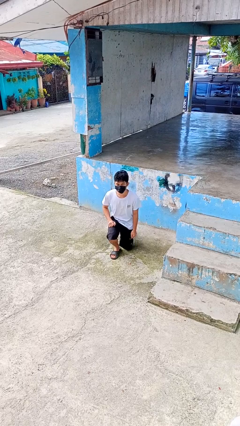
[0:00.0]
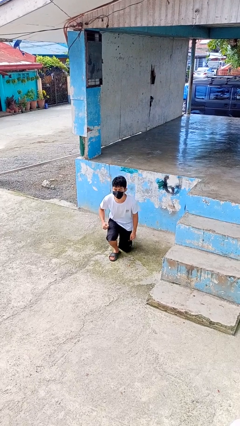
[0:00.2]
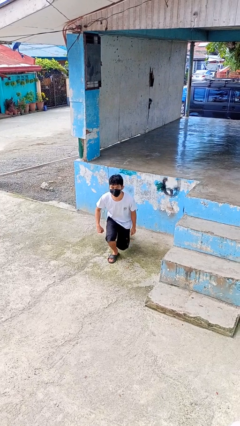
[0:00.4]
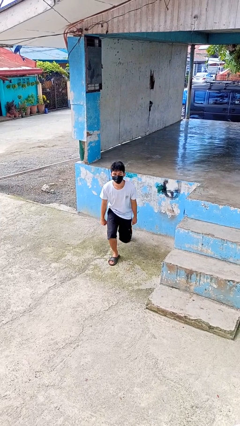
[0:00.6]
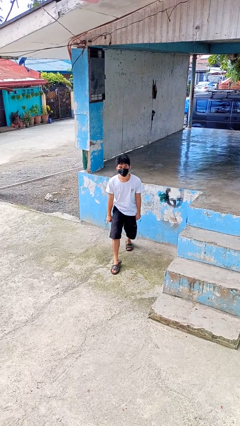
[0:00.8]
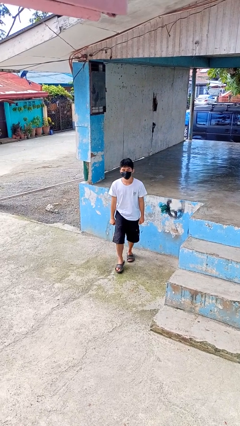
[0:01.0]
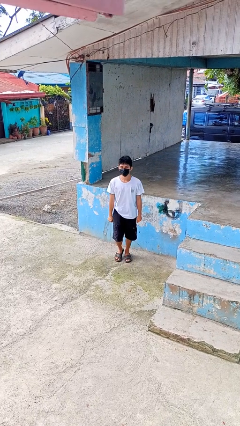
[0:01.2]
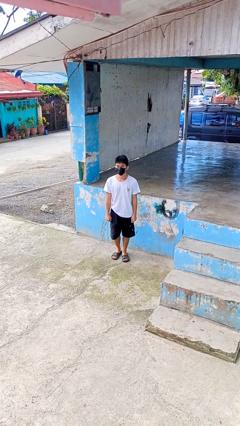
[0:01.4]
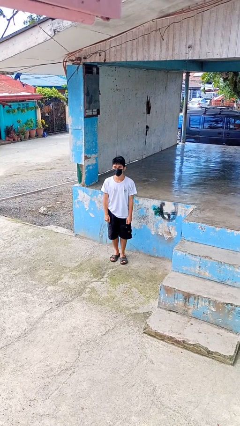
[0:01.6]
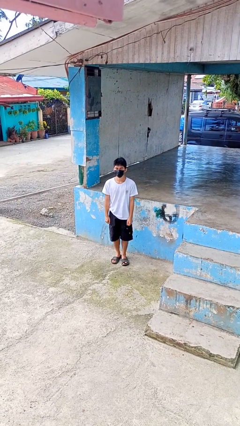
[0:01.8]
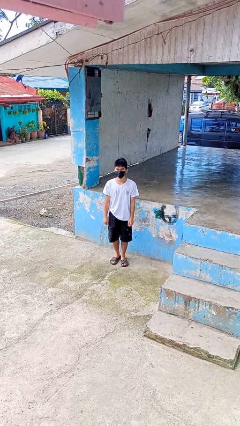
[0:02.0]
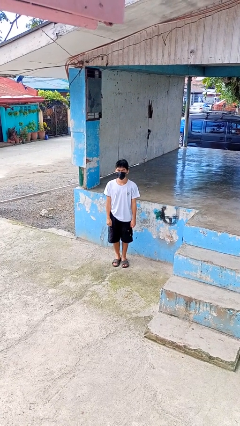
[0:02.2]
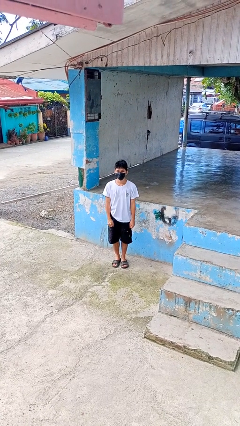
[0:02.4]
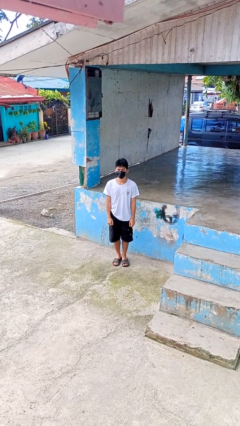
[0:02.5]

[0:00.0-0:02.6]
person stands up from floor

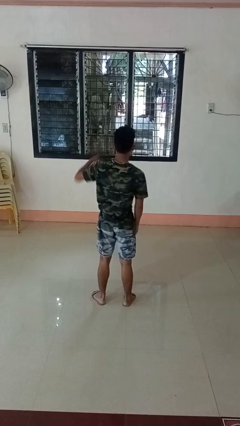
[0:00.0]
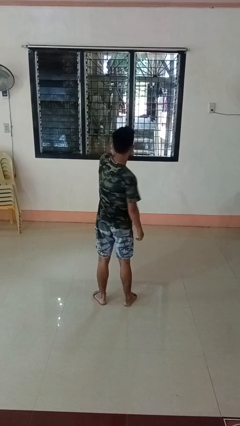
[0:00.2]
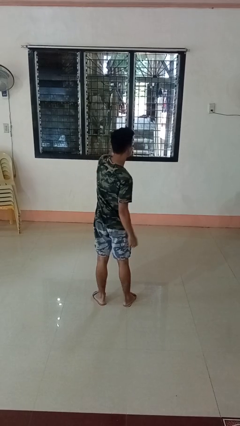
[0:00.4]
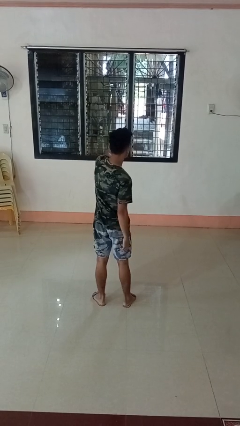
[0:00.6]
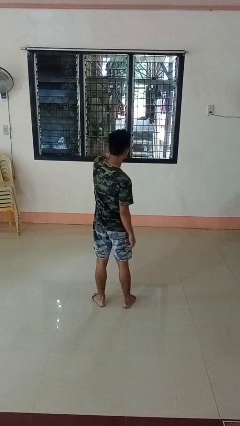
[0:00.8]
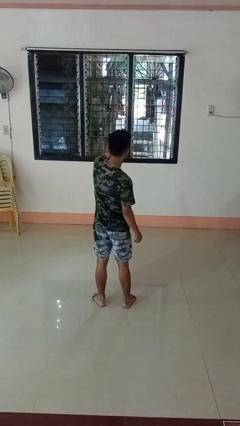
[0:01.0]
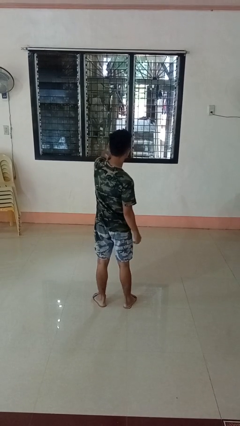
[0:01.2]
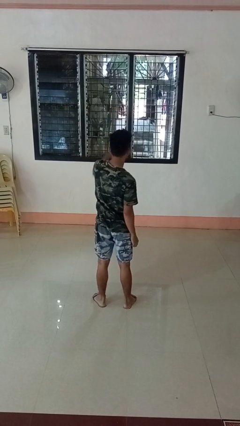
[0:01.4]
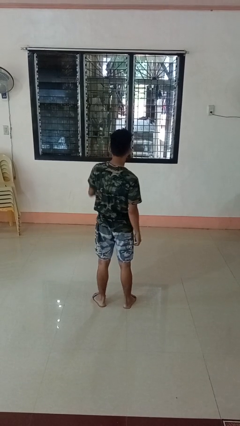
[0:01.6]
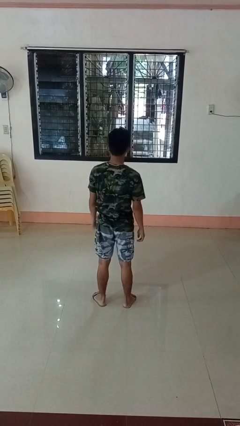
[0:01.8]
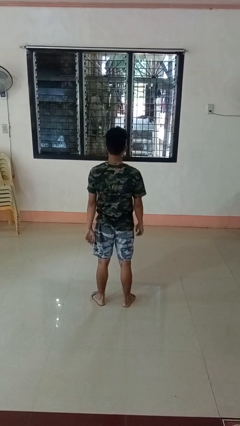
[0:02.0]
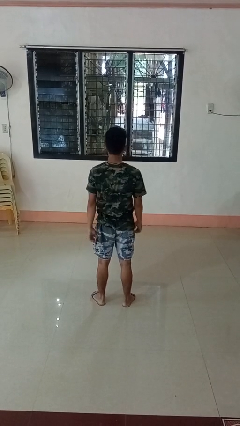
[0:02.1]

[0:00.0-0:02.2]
person punches

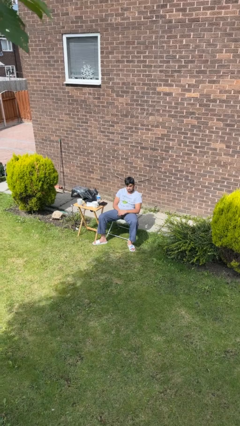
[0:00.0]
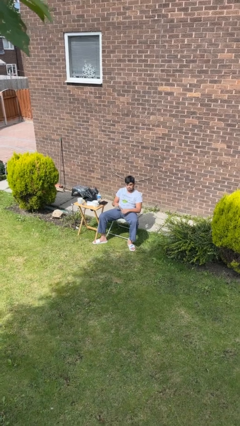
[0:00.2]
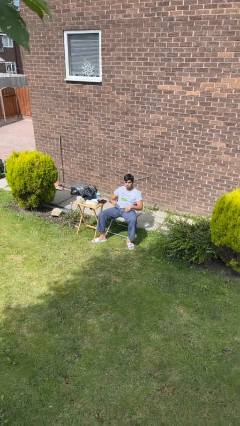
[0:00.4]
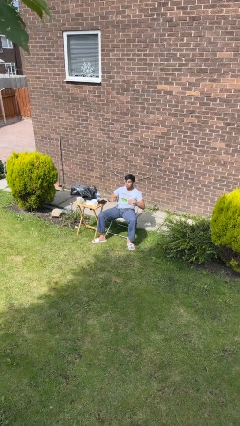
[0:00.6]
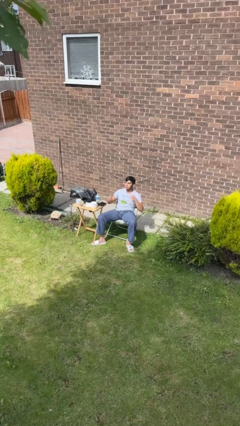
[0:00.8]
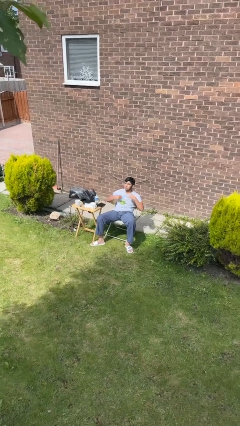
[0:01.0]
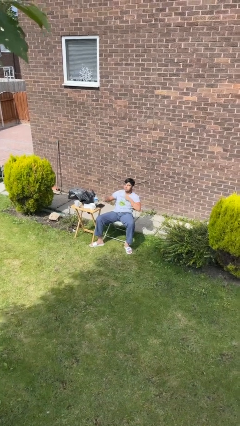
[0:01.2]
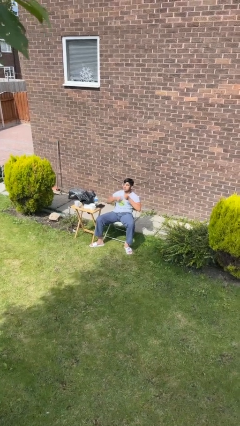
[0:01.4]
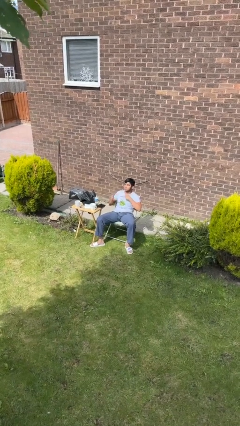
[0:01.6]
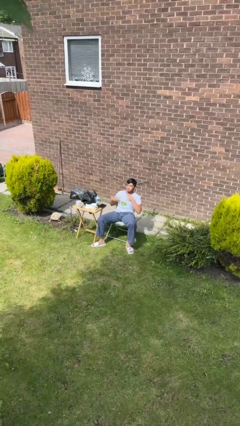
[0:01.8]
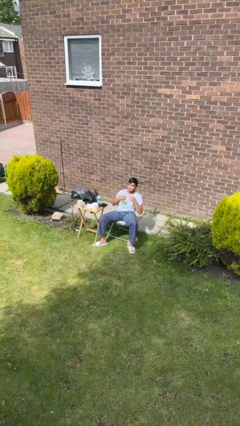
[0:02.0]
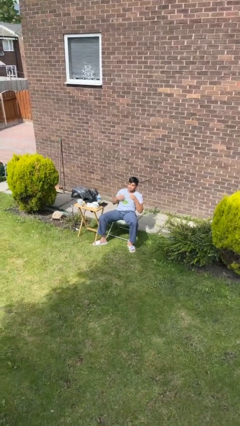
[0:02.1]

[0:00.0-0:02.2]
person drums on chest

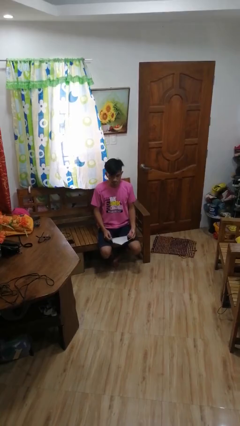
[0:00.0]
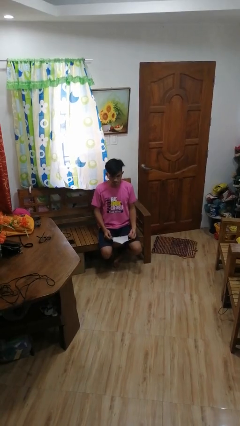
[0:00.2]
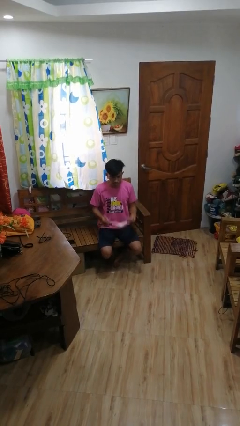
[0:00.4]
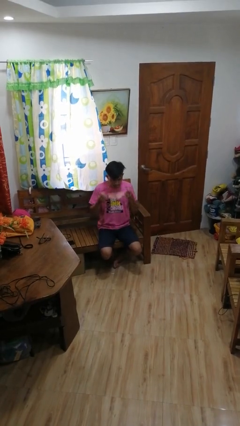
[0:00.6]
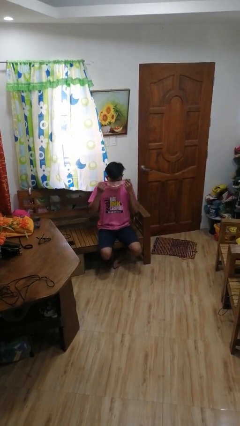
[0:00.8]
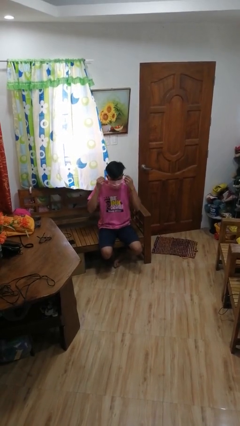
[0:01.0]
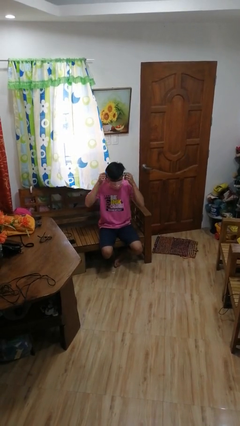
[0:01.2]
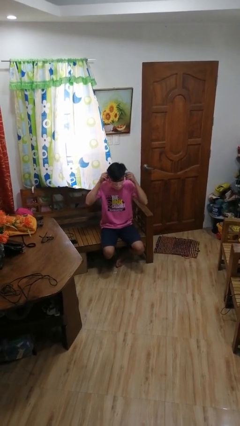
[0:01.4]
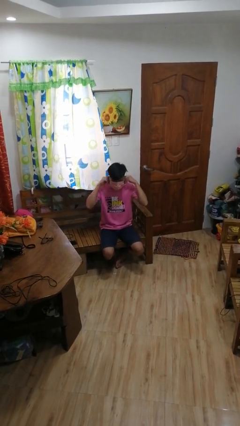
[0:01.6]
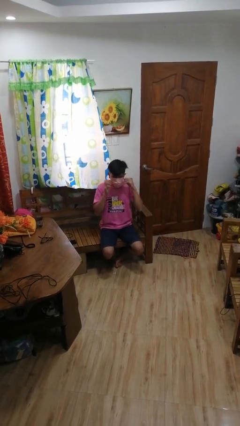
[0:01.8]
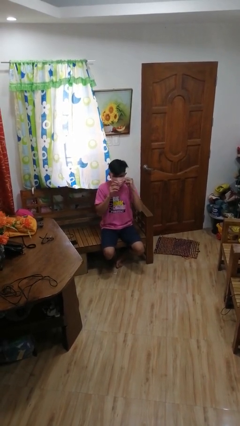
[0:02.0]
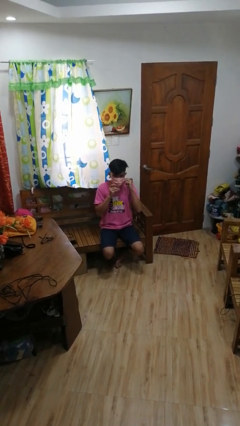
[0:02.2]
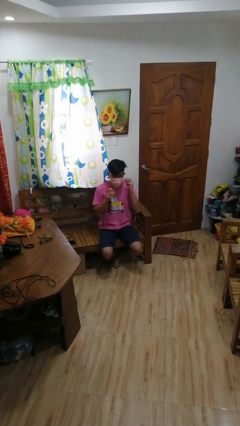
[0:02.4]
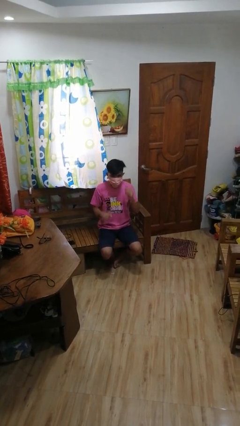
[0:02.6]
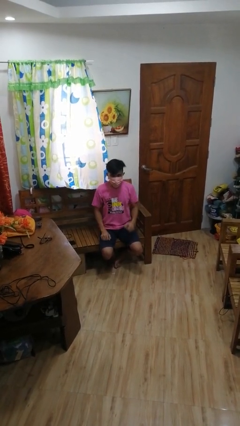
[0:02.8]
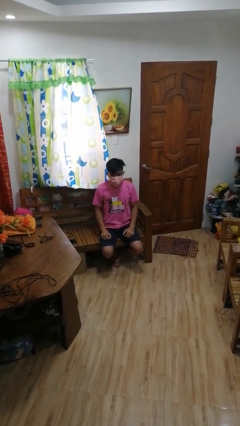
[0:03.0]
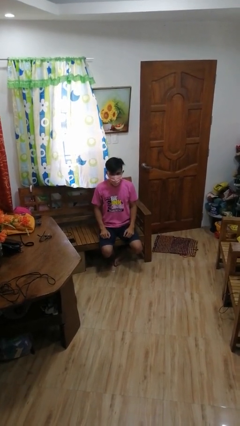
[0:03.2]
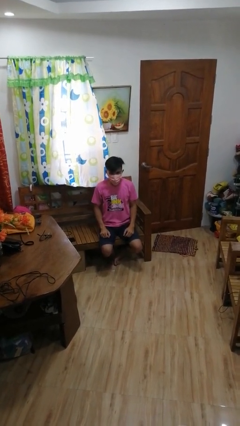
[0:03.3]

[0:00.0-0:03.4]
person puts on facemask

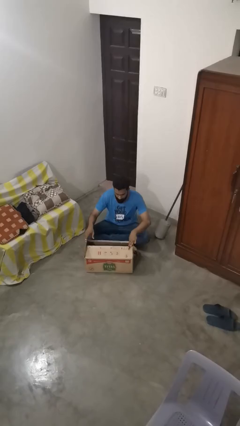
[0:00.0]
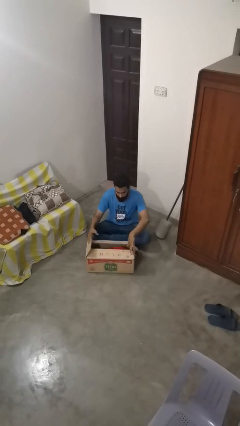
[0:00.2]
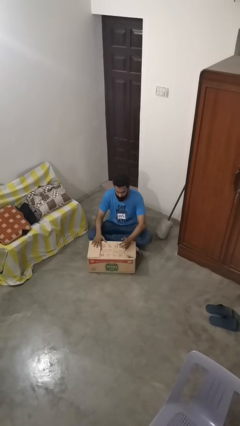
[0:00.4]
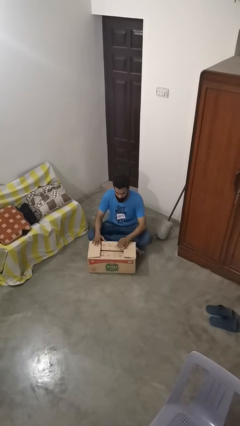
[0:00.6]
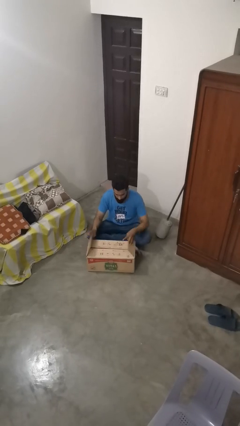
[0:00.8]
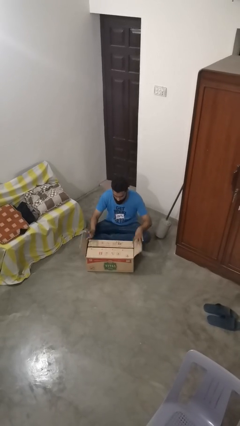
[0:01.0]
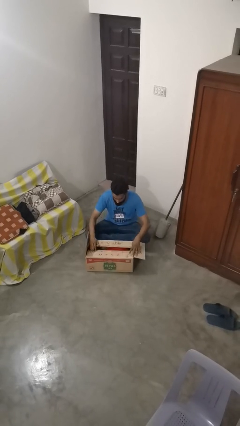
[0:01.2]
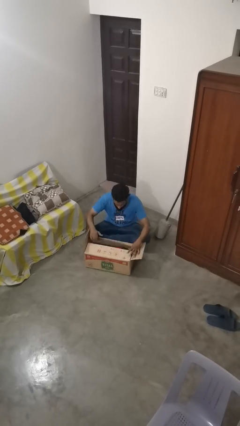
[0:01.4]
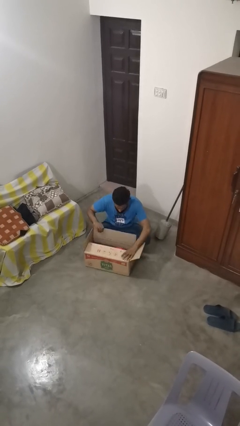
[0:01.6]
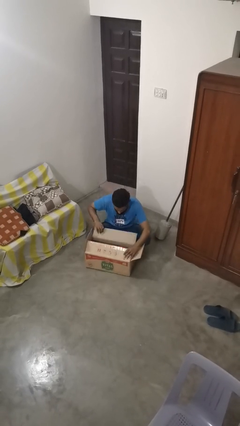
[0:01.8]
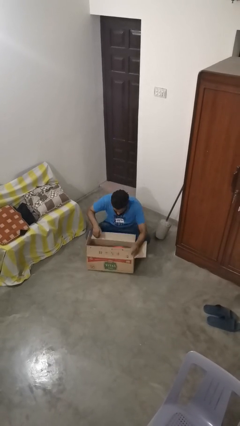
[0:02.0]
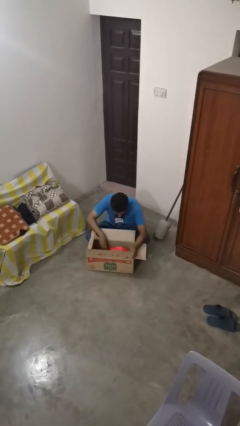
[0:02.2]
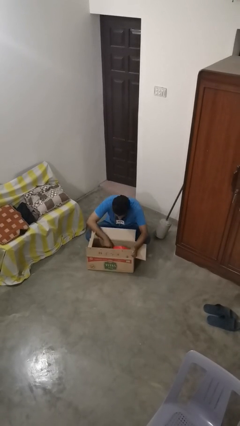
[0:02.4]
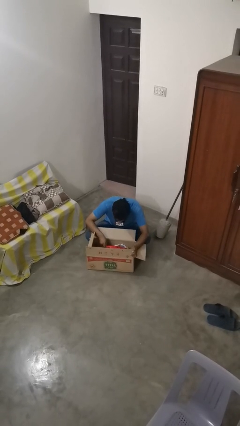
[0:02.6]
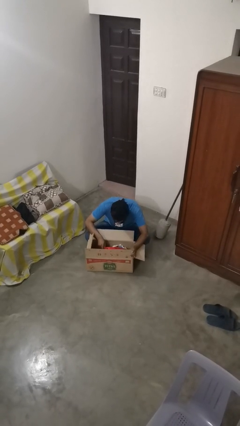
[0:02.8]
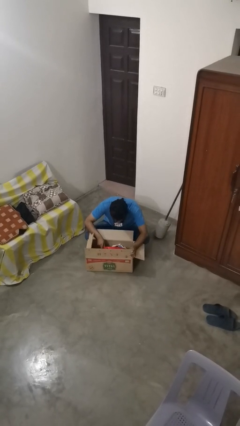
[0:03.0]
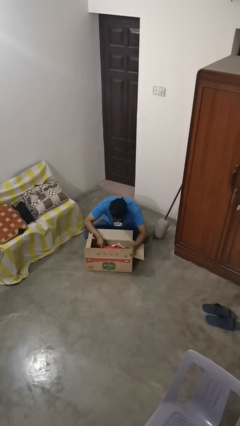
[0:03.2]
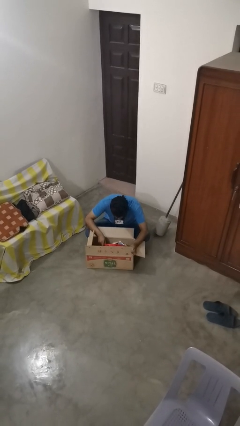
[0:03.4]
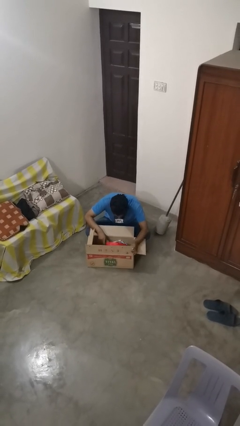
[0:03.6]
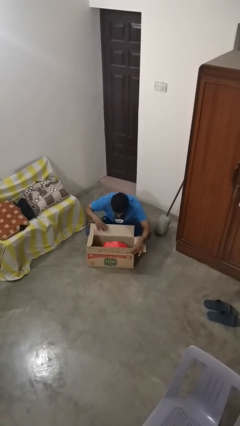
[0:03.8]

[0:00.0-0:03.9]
person searches in box

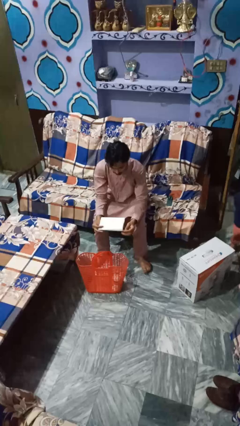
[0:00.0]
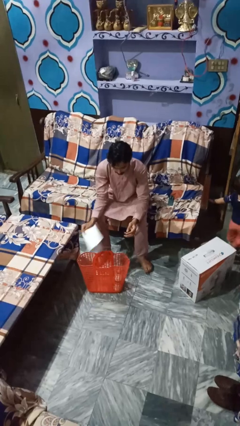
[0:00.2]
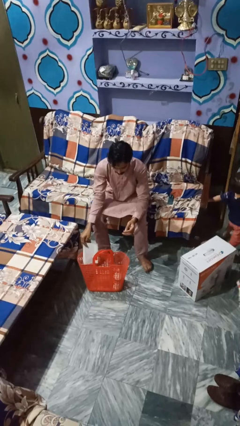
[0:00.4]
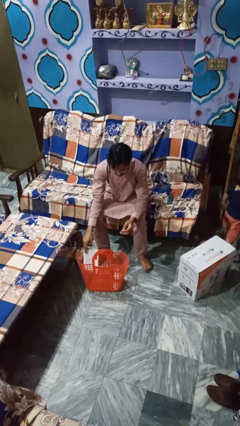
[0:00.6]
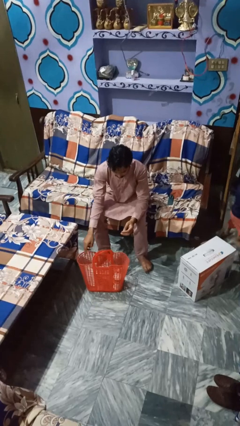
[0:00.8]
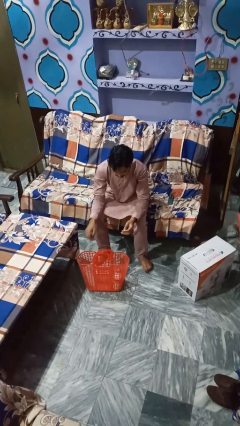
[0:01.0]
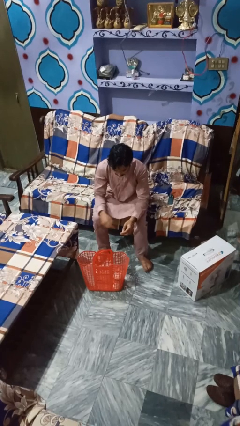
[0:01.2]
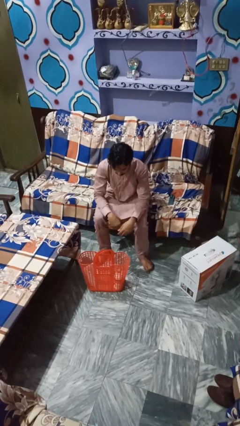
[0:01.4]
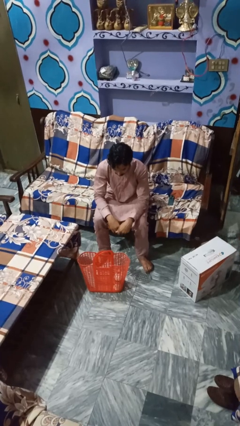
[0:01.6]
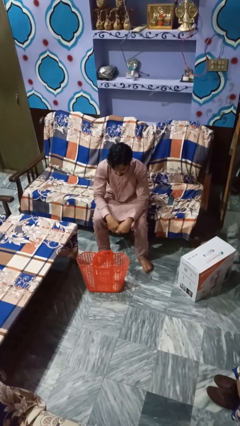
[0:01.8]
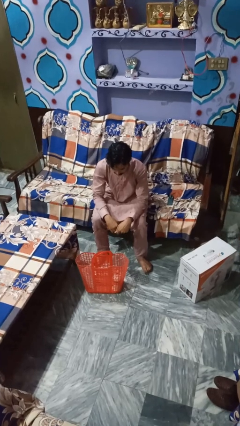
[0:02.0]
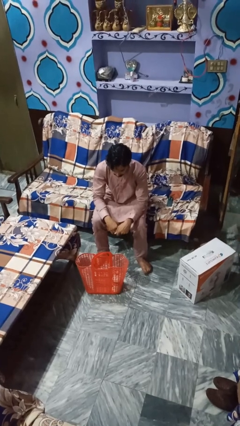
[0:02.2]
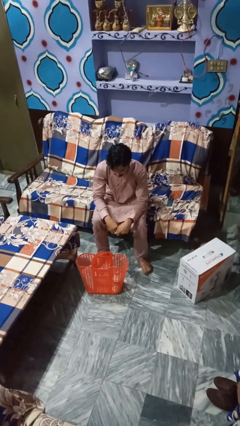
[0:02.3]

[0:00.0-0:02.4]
person discards trash

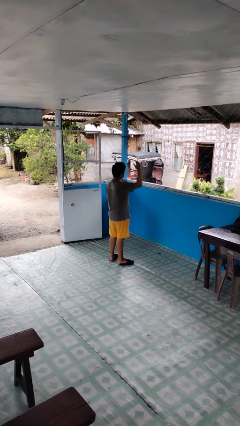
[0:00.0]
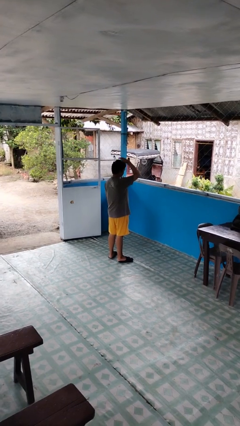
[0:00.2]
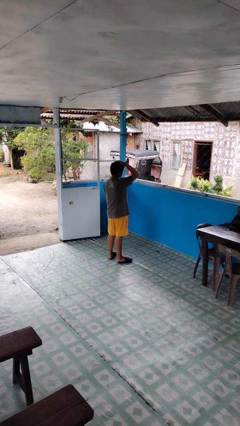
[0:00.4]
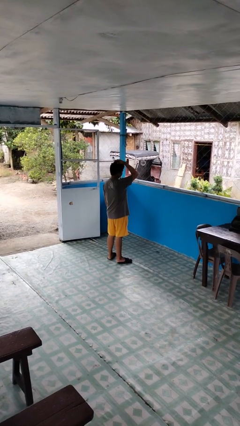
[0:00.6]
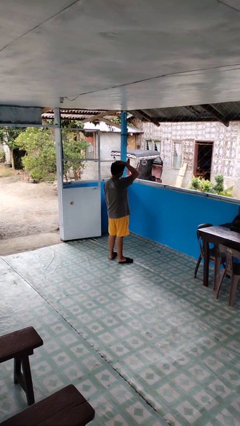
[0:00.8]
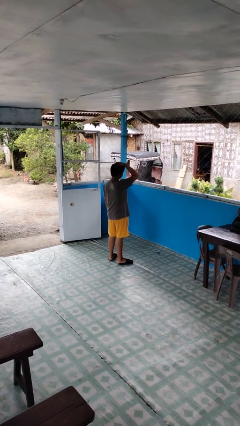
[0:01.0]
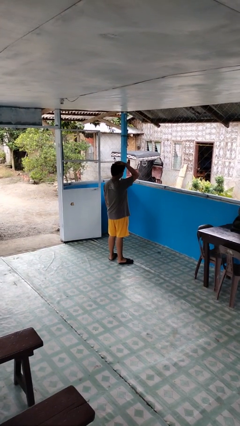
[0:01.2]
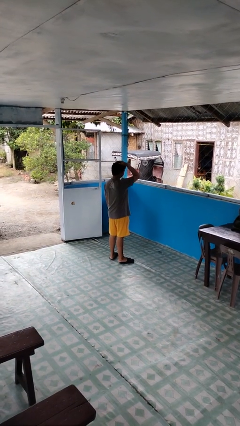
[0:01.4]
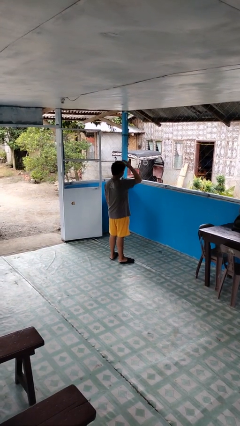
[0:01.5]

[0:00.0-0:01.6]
person pats head
